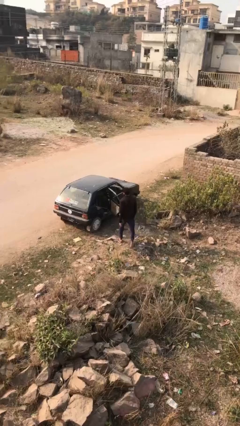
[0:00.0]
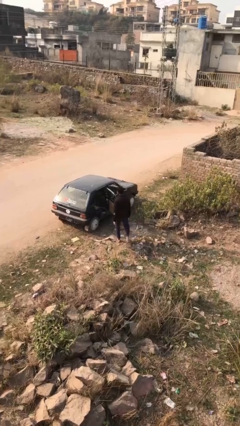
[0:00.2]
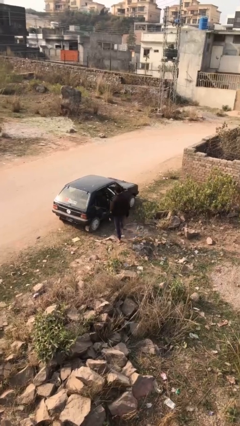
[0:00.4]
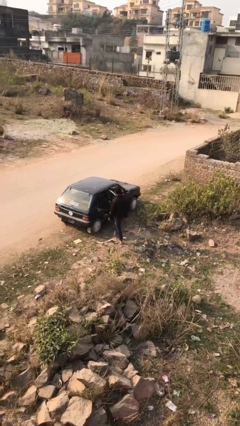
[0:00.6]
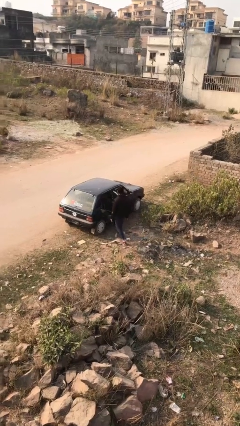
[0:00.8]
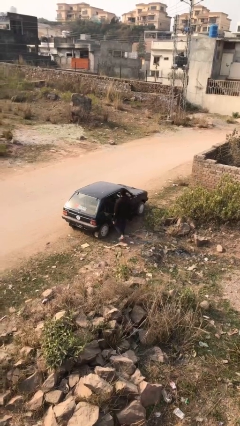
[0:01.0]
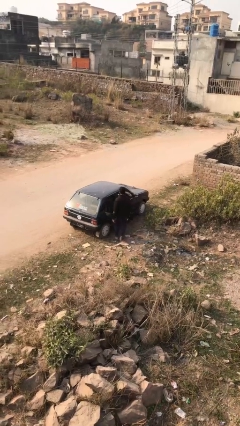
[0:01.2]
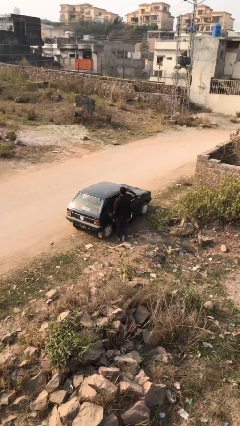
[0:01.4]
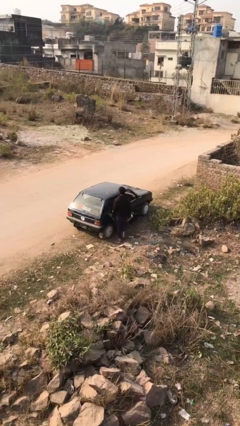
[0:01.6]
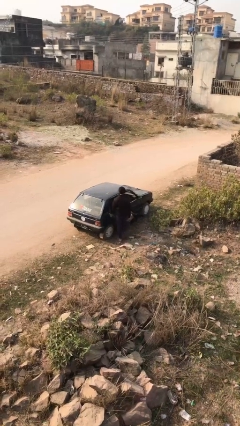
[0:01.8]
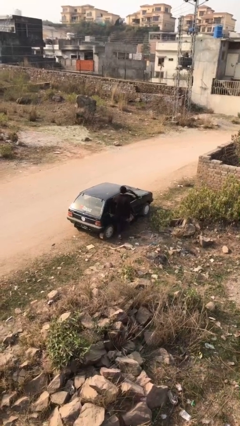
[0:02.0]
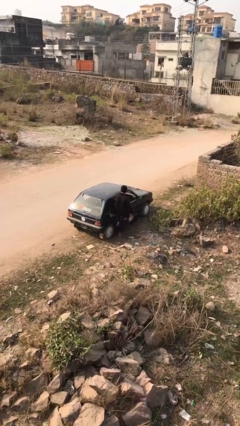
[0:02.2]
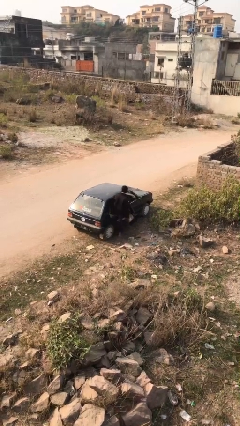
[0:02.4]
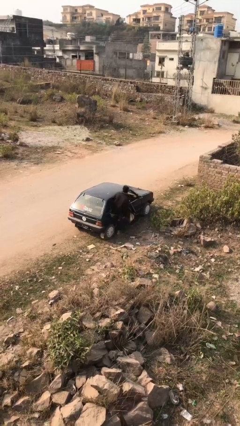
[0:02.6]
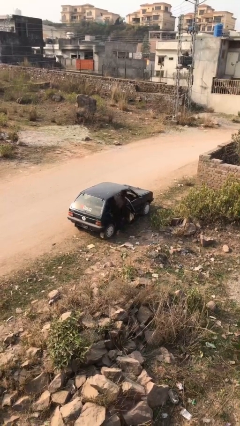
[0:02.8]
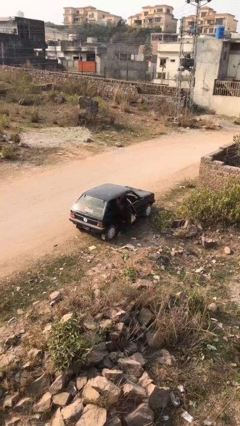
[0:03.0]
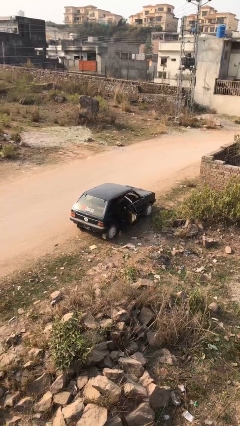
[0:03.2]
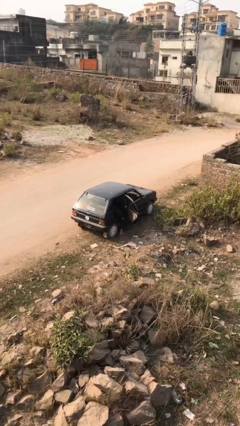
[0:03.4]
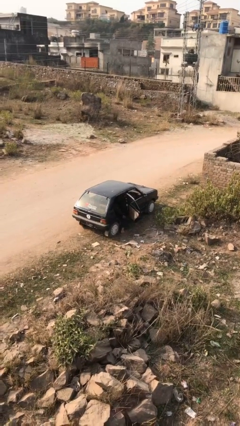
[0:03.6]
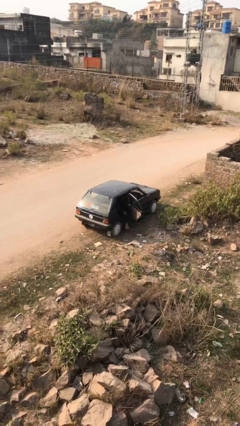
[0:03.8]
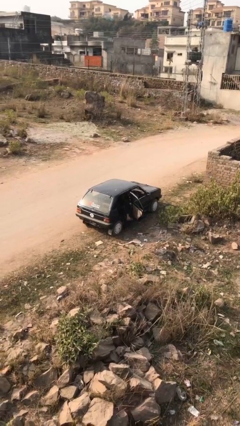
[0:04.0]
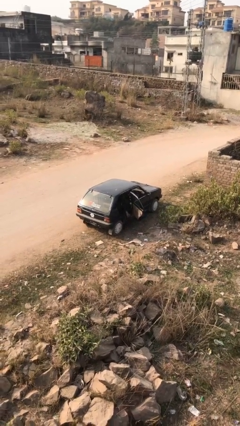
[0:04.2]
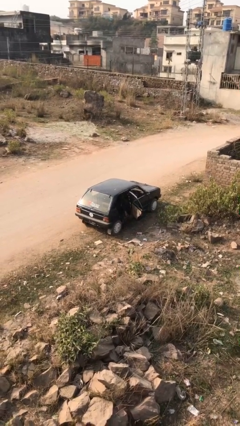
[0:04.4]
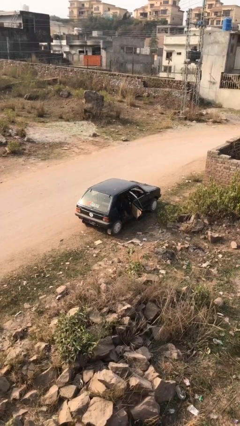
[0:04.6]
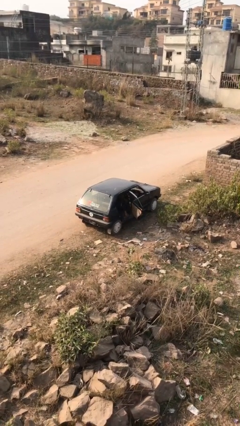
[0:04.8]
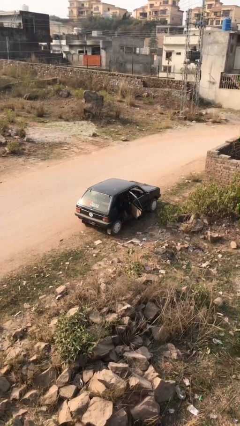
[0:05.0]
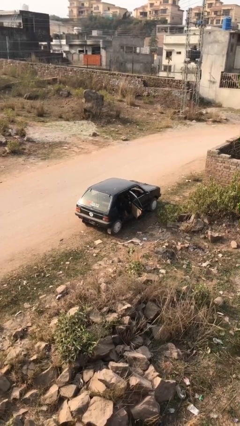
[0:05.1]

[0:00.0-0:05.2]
person enters car

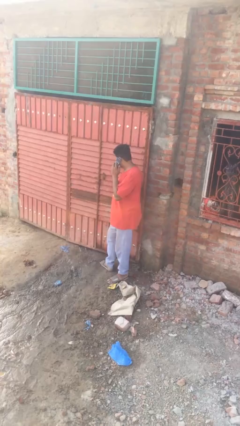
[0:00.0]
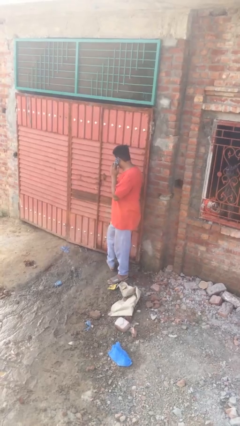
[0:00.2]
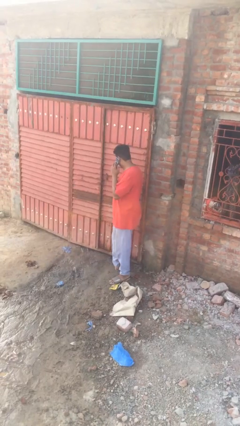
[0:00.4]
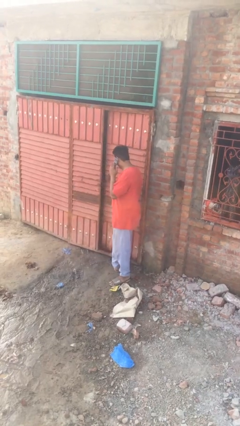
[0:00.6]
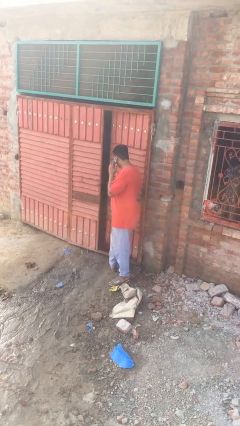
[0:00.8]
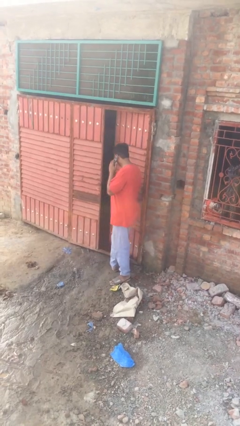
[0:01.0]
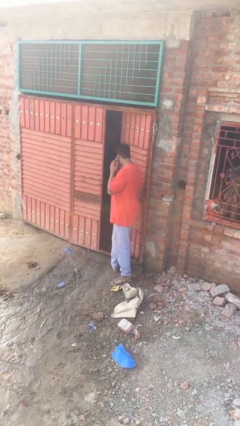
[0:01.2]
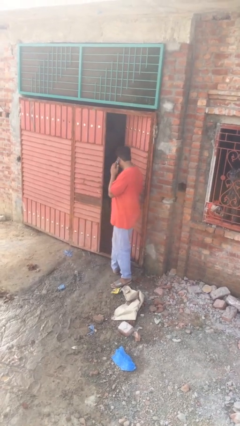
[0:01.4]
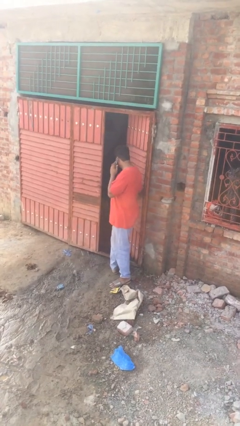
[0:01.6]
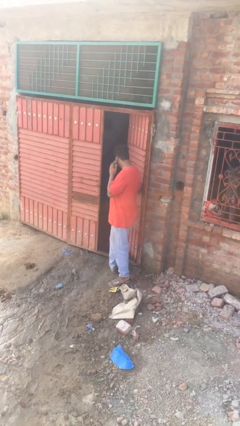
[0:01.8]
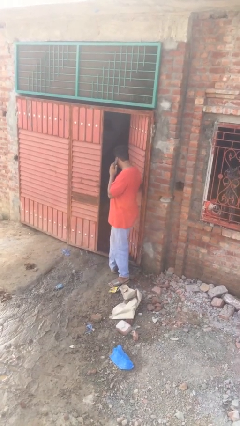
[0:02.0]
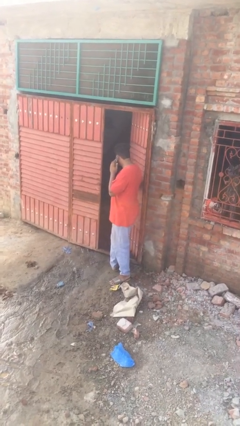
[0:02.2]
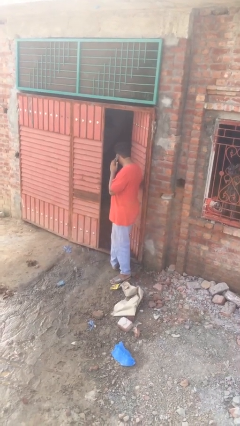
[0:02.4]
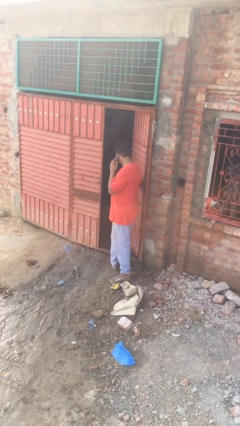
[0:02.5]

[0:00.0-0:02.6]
person opens facility door

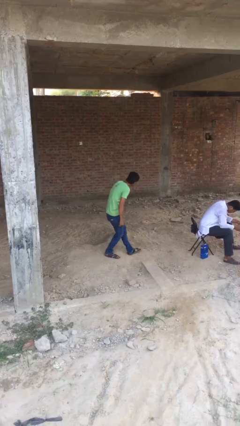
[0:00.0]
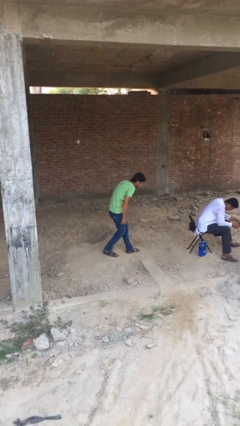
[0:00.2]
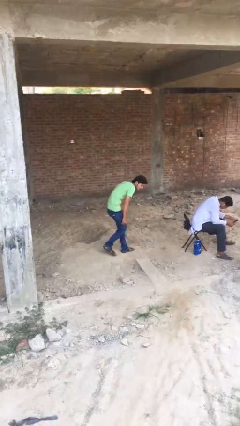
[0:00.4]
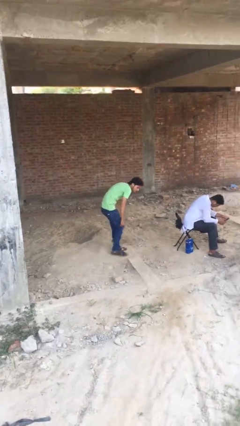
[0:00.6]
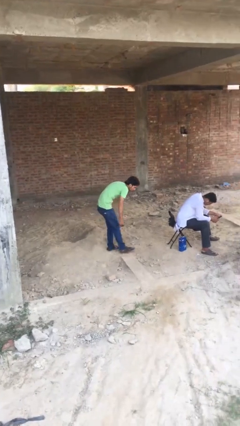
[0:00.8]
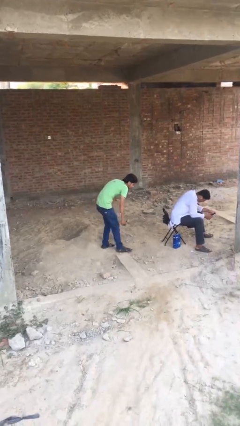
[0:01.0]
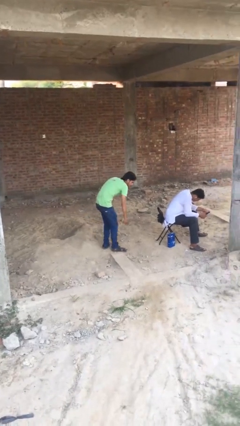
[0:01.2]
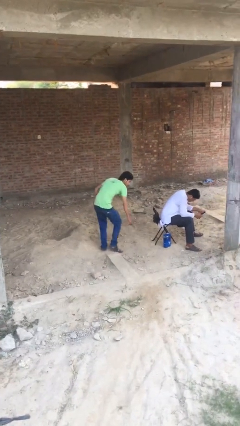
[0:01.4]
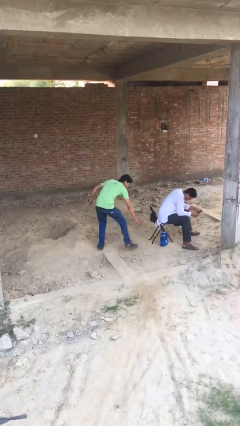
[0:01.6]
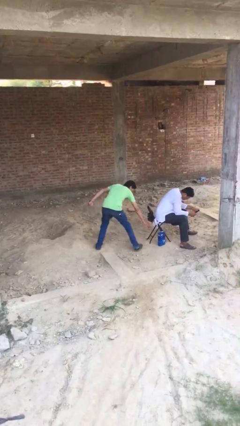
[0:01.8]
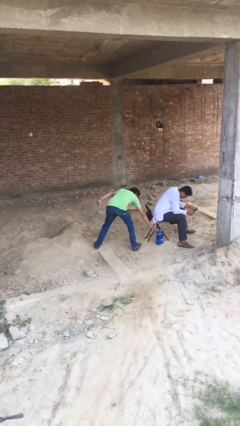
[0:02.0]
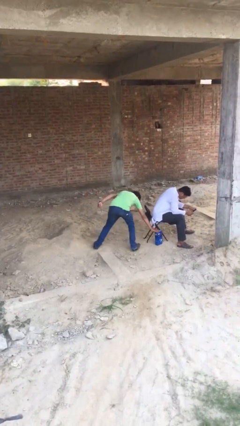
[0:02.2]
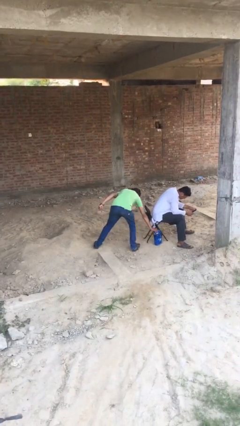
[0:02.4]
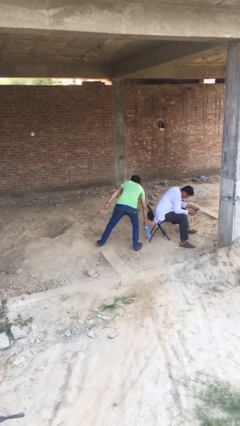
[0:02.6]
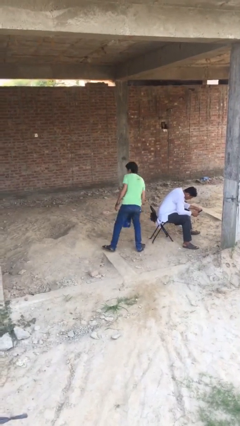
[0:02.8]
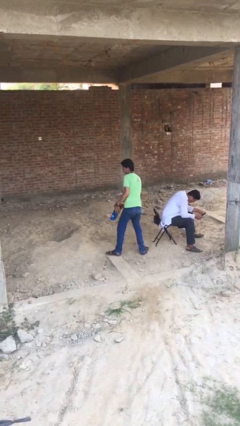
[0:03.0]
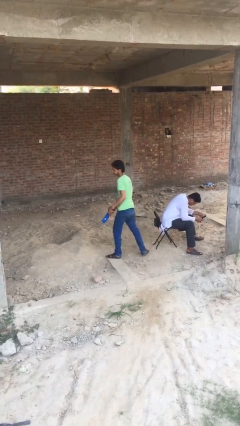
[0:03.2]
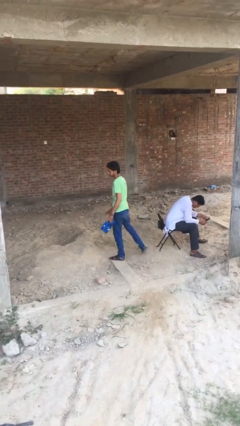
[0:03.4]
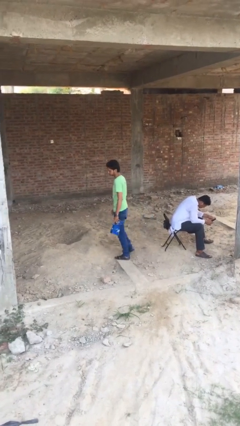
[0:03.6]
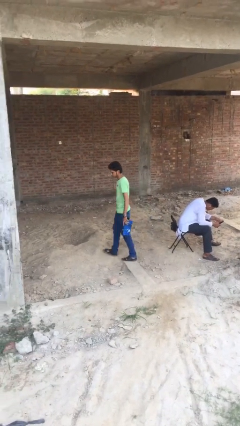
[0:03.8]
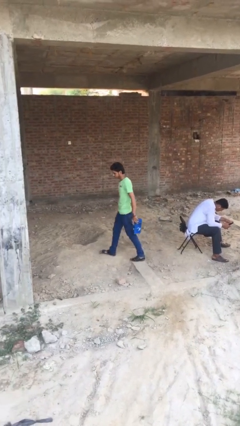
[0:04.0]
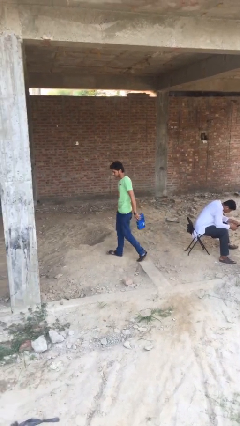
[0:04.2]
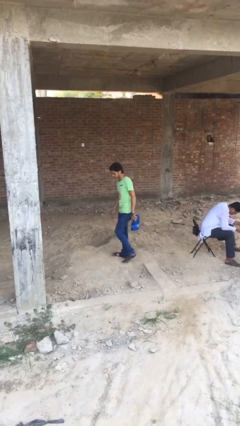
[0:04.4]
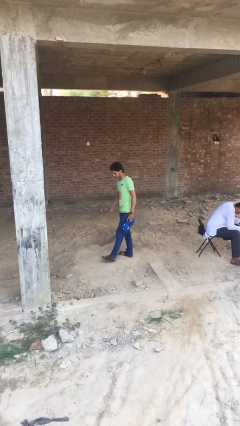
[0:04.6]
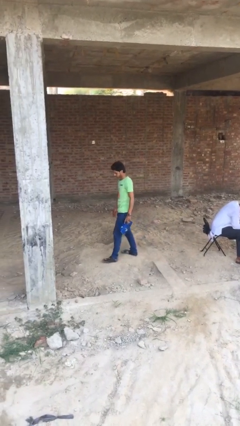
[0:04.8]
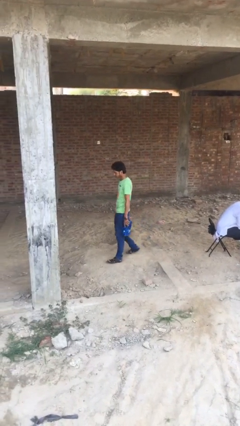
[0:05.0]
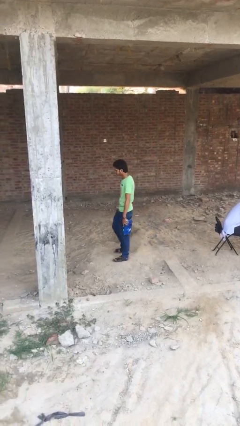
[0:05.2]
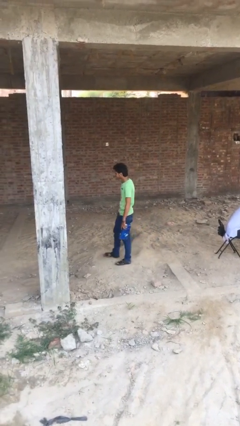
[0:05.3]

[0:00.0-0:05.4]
person steals object from person

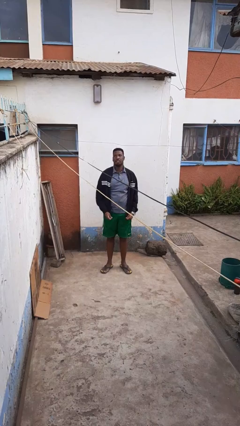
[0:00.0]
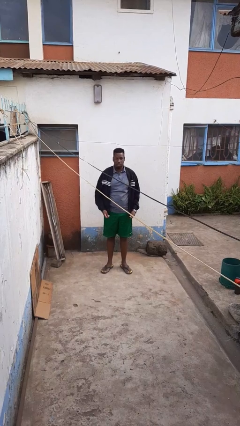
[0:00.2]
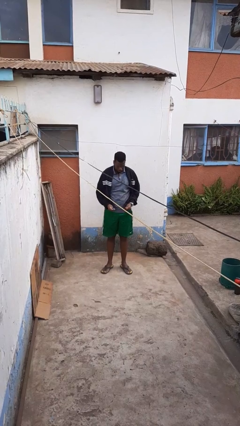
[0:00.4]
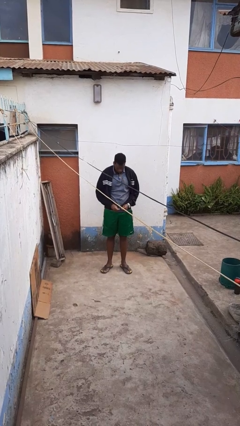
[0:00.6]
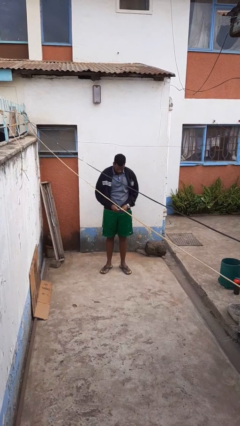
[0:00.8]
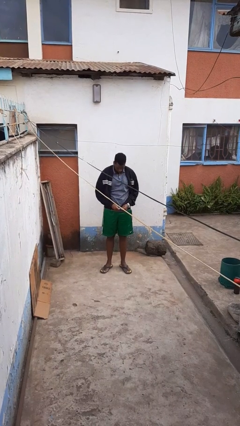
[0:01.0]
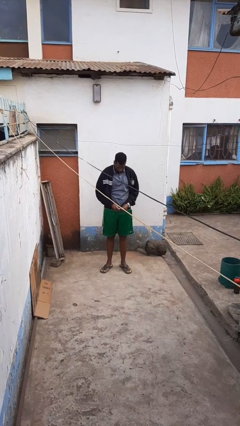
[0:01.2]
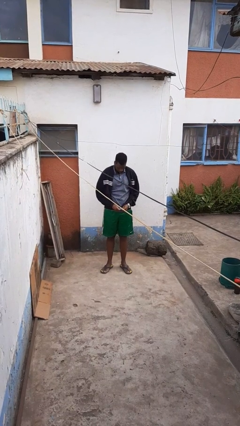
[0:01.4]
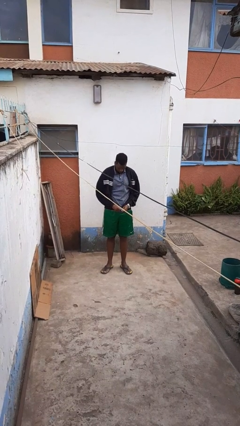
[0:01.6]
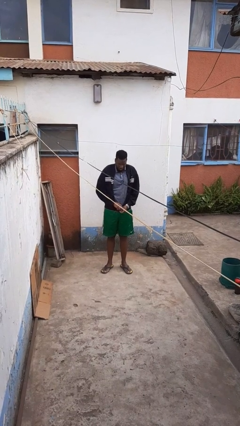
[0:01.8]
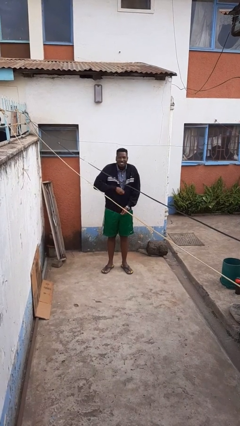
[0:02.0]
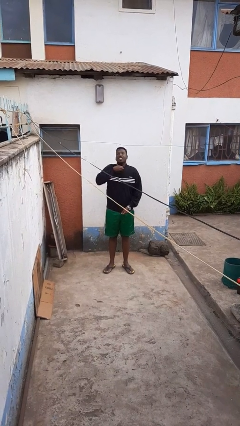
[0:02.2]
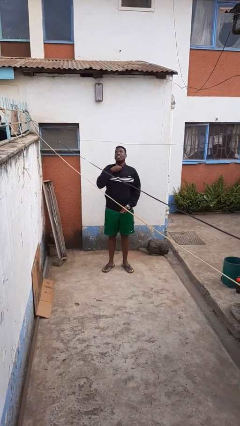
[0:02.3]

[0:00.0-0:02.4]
person zips up jacket

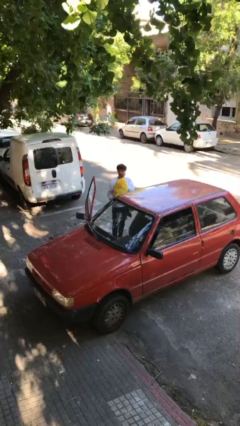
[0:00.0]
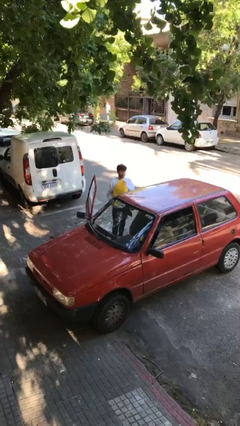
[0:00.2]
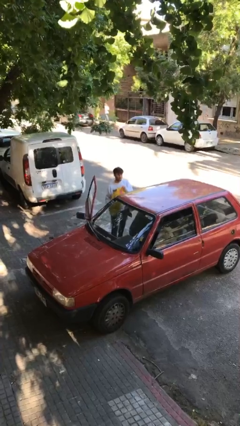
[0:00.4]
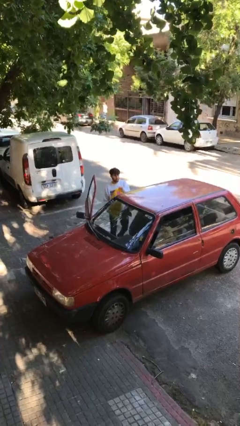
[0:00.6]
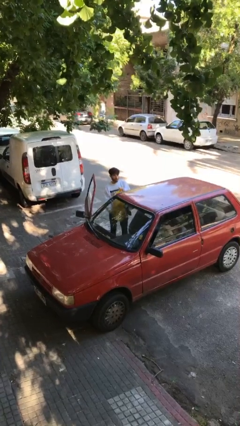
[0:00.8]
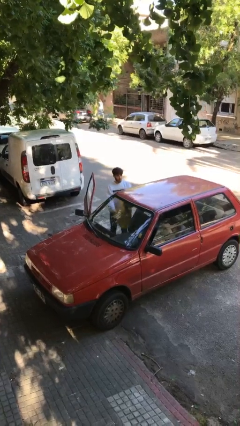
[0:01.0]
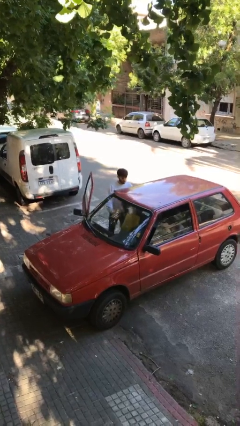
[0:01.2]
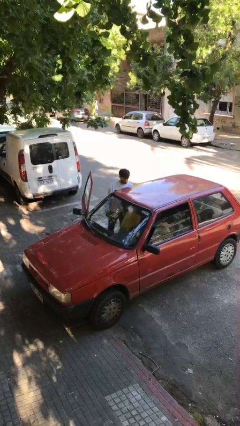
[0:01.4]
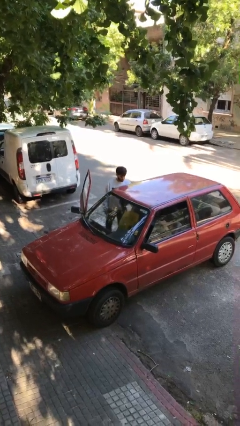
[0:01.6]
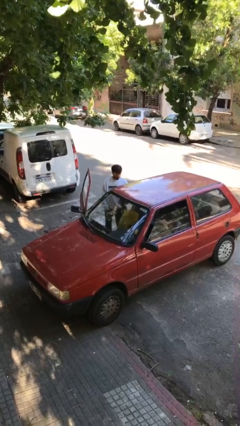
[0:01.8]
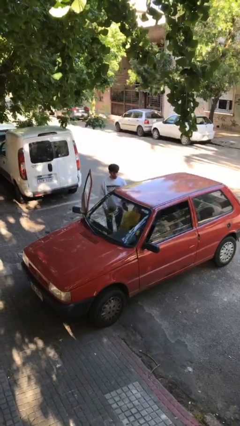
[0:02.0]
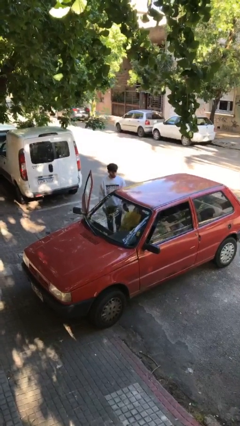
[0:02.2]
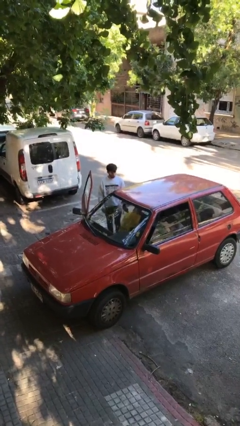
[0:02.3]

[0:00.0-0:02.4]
person loads car
